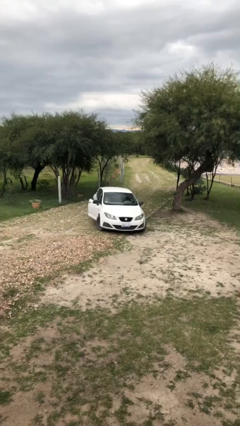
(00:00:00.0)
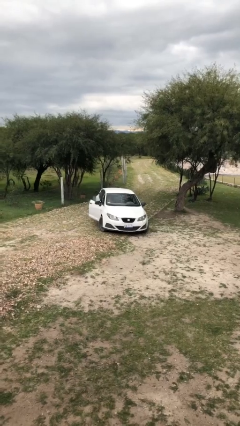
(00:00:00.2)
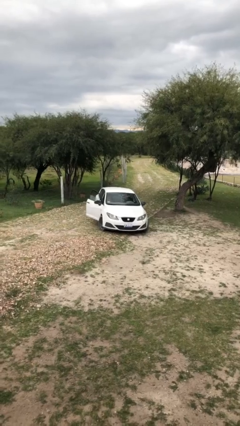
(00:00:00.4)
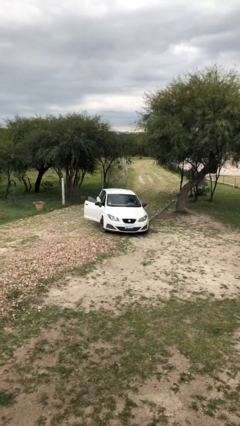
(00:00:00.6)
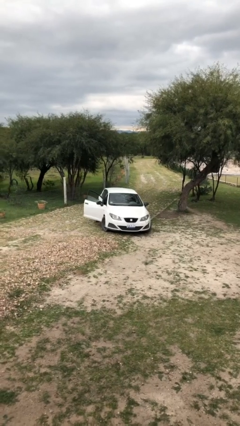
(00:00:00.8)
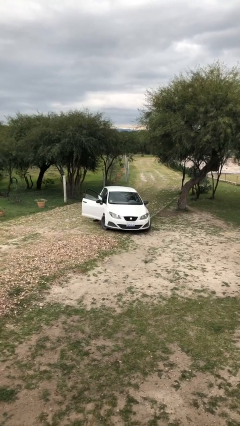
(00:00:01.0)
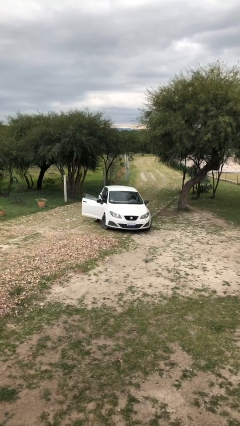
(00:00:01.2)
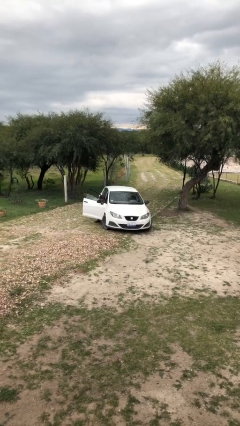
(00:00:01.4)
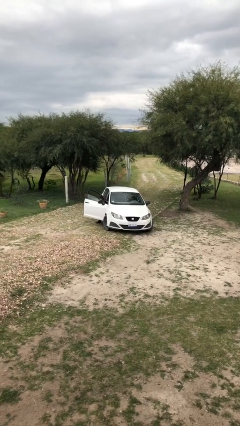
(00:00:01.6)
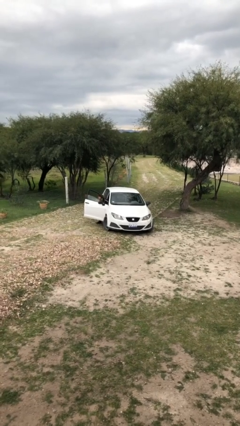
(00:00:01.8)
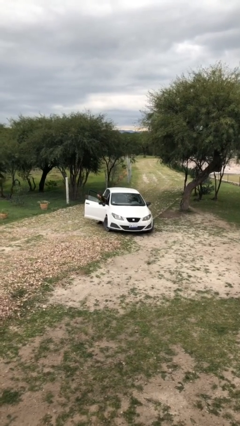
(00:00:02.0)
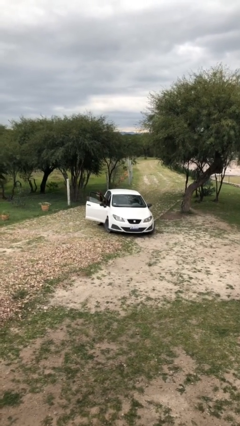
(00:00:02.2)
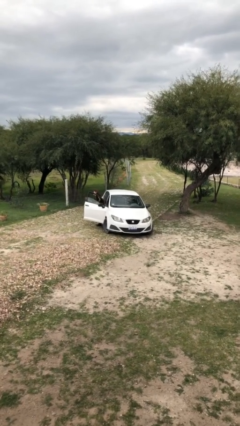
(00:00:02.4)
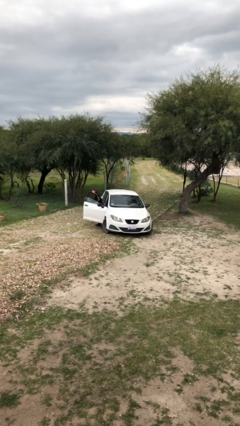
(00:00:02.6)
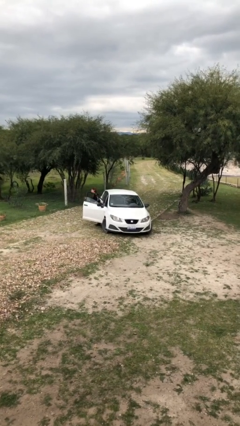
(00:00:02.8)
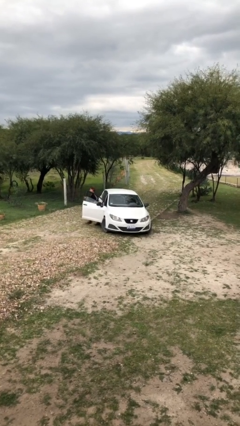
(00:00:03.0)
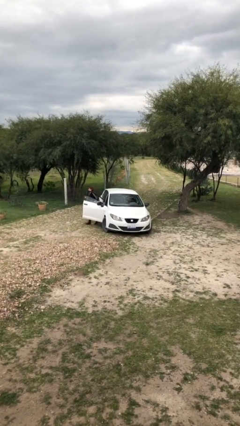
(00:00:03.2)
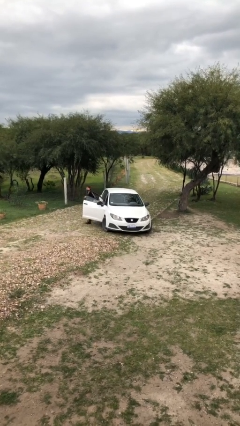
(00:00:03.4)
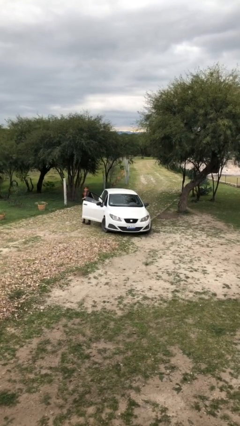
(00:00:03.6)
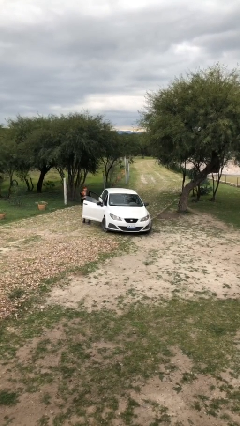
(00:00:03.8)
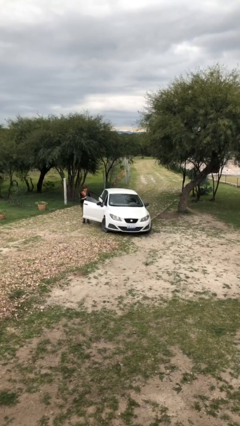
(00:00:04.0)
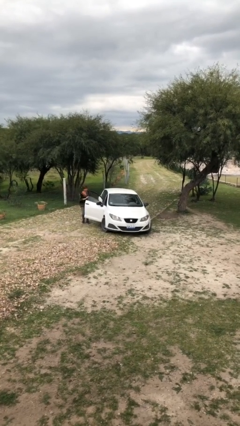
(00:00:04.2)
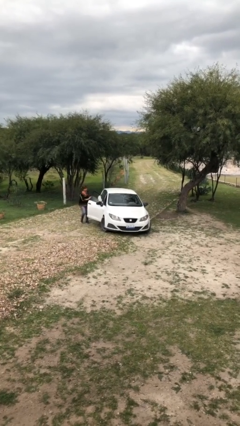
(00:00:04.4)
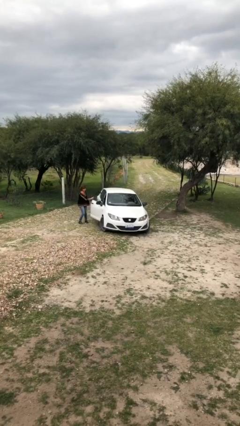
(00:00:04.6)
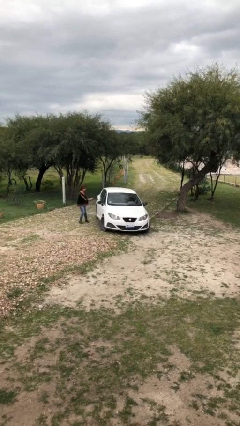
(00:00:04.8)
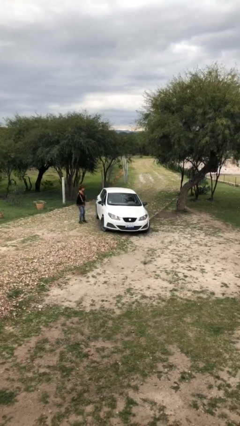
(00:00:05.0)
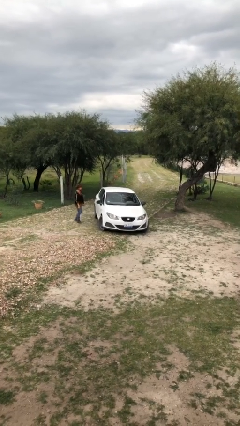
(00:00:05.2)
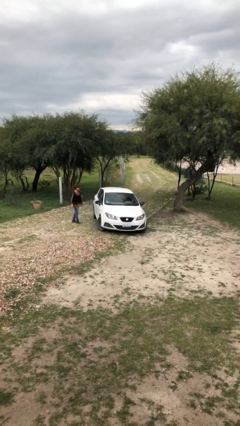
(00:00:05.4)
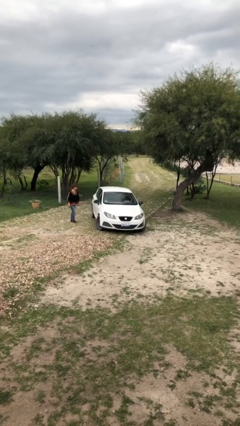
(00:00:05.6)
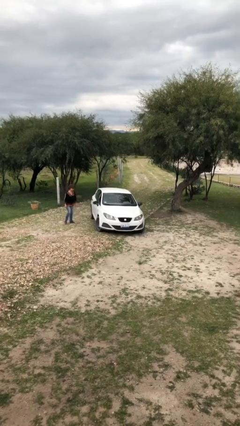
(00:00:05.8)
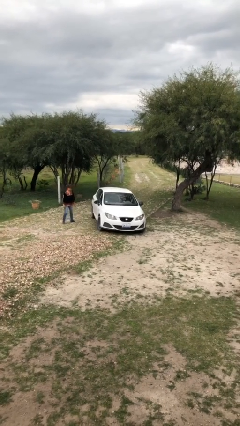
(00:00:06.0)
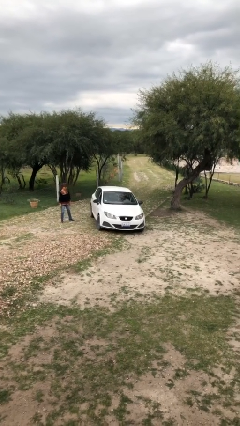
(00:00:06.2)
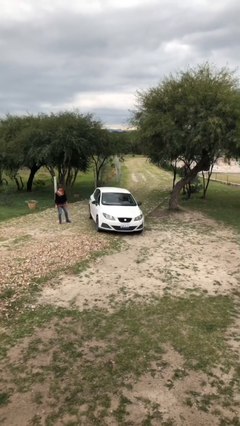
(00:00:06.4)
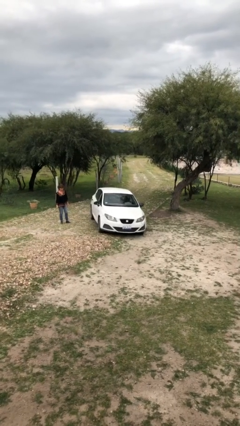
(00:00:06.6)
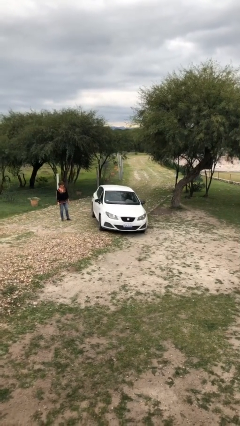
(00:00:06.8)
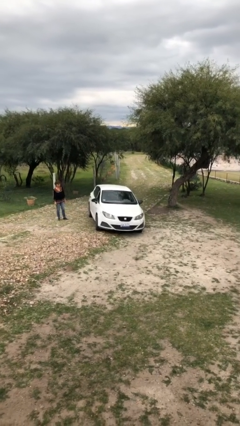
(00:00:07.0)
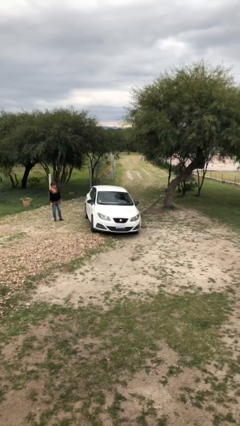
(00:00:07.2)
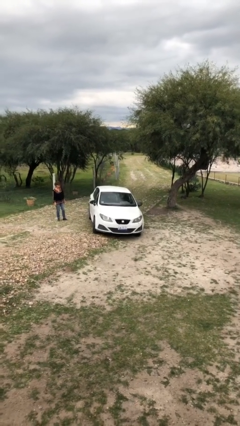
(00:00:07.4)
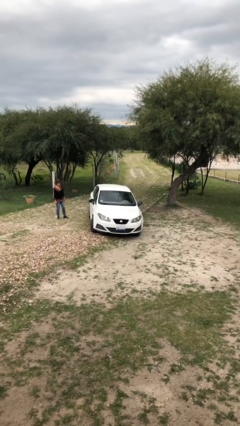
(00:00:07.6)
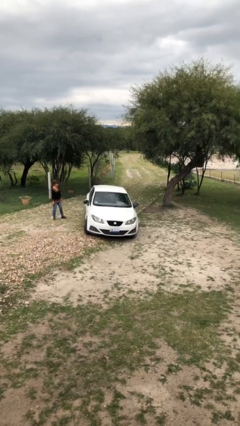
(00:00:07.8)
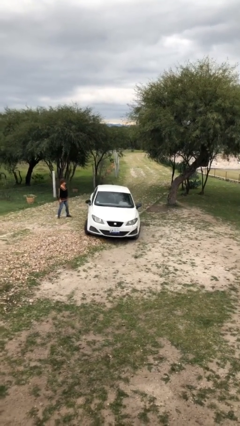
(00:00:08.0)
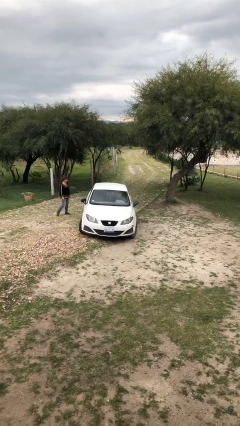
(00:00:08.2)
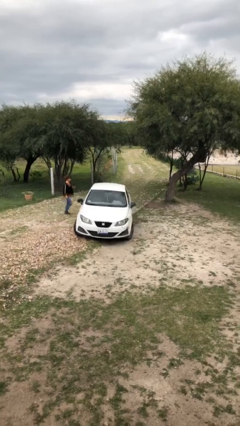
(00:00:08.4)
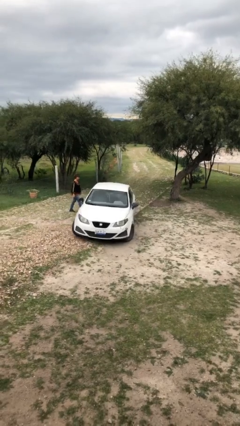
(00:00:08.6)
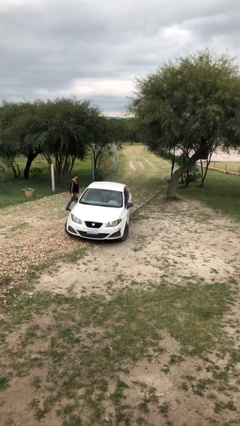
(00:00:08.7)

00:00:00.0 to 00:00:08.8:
car drops off person

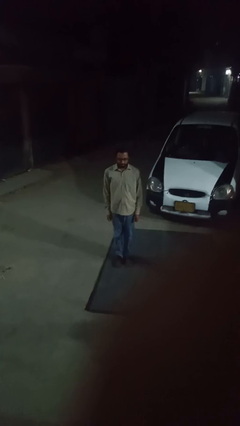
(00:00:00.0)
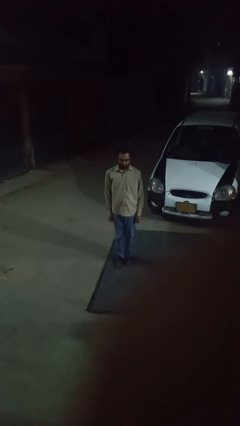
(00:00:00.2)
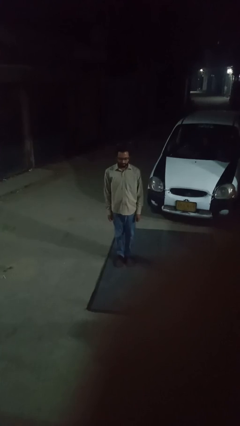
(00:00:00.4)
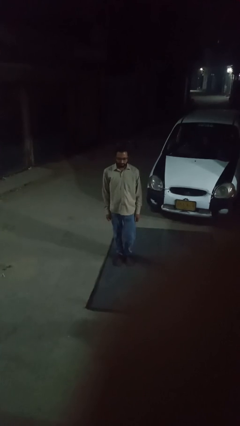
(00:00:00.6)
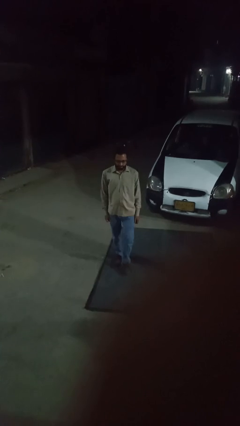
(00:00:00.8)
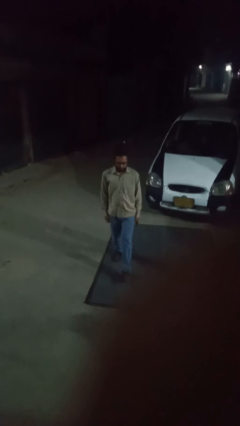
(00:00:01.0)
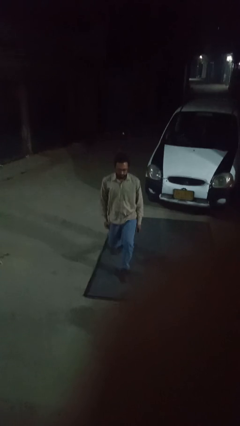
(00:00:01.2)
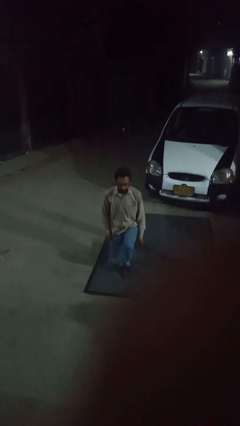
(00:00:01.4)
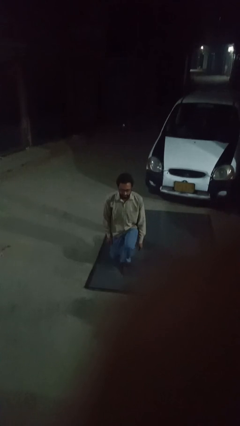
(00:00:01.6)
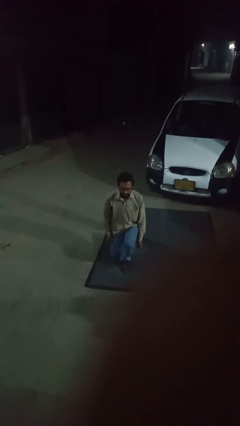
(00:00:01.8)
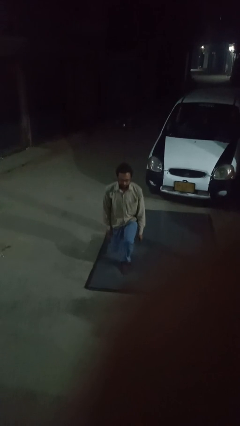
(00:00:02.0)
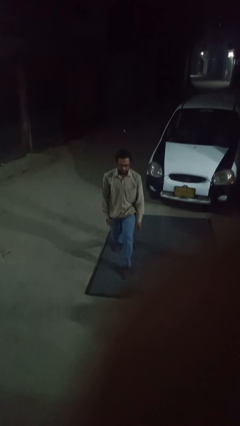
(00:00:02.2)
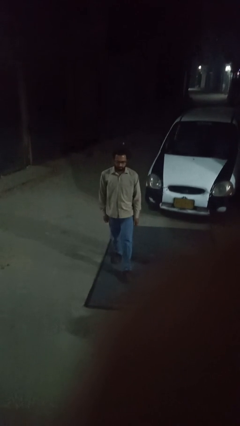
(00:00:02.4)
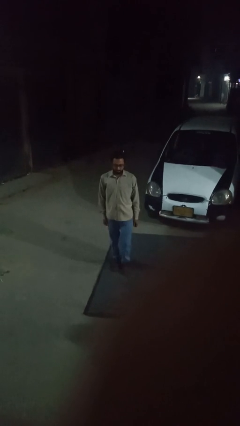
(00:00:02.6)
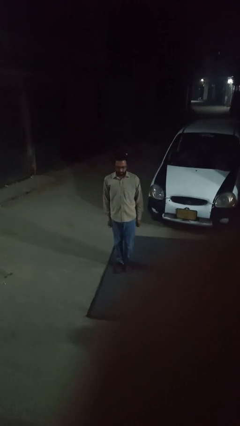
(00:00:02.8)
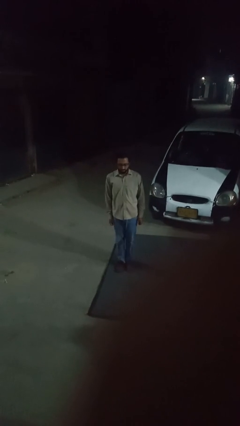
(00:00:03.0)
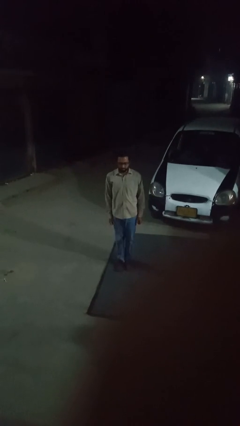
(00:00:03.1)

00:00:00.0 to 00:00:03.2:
person exercises with lunges

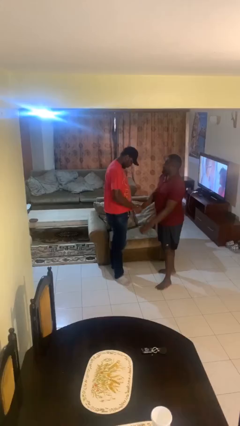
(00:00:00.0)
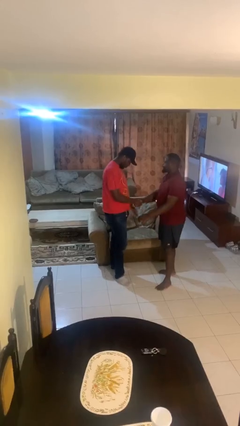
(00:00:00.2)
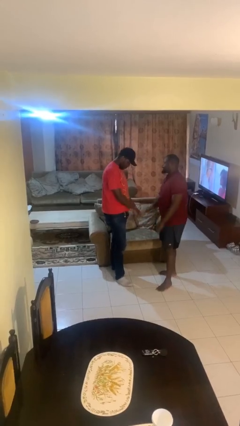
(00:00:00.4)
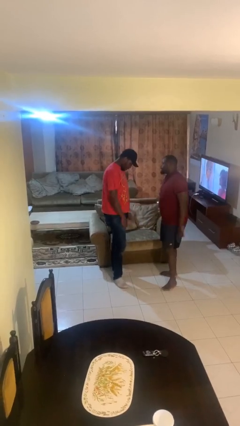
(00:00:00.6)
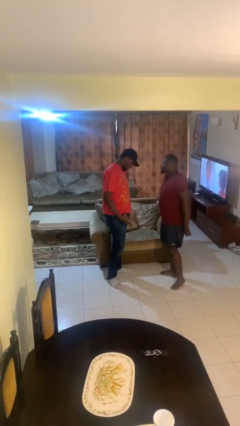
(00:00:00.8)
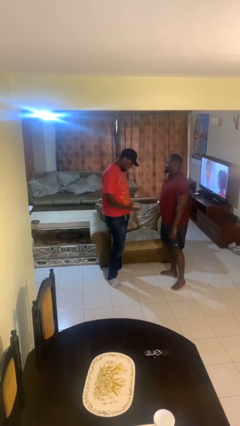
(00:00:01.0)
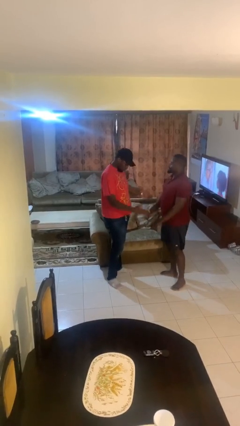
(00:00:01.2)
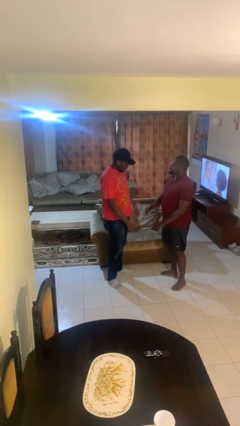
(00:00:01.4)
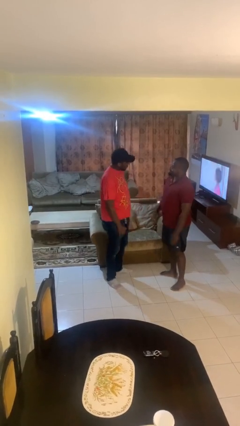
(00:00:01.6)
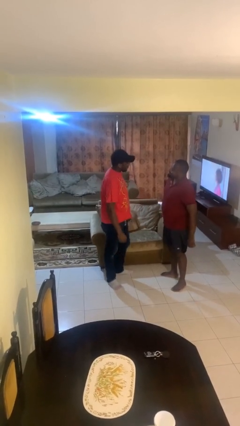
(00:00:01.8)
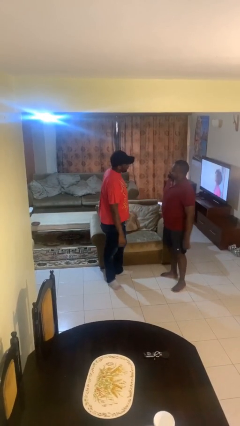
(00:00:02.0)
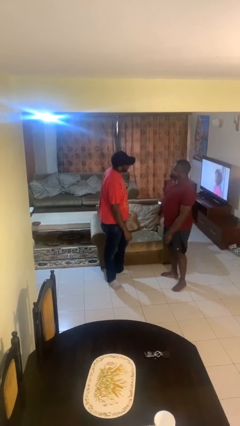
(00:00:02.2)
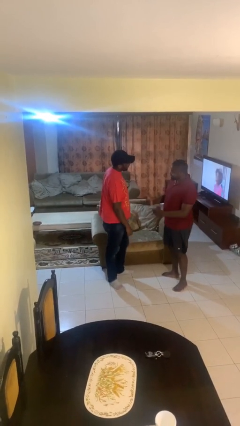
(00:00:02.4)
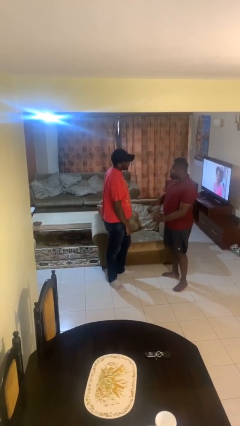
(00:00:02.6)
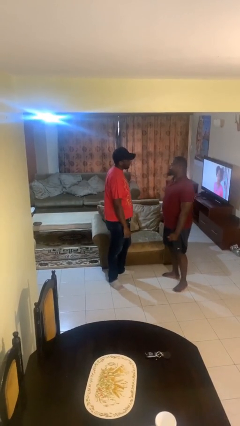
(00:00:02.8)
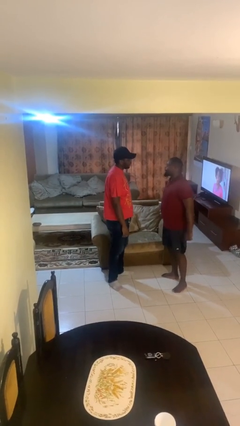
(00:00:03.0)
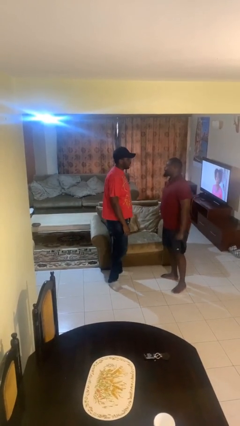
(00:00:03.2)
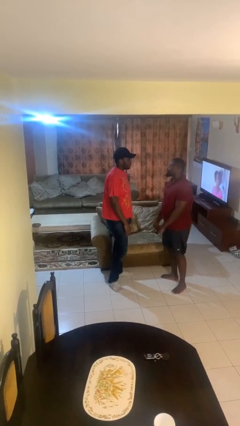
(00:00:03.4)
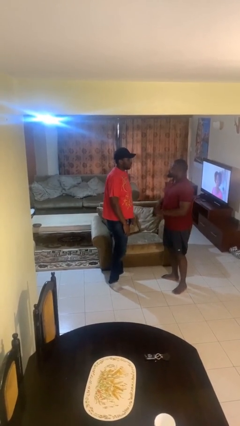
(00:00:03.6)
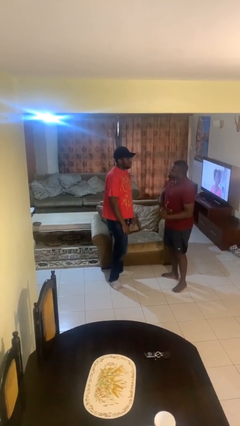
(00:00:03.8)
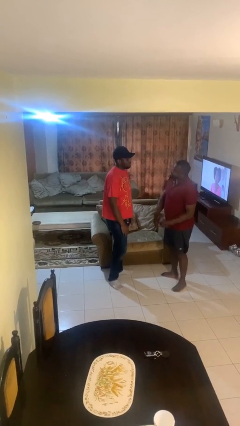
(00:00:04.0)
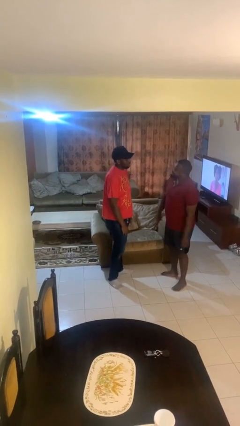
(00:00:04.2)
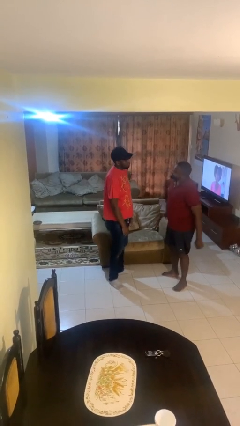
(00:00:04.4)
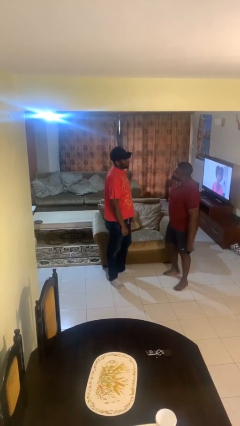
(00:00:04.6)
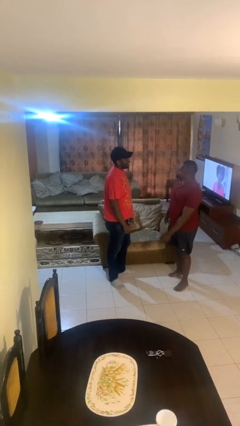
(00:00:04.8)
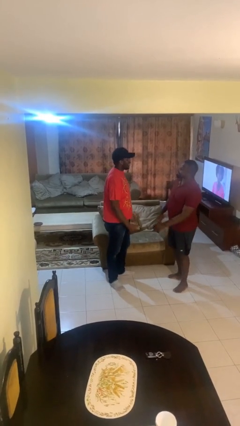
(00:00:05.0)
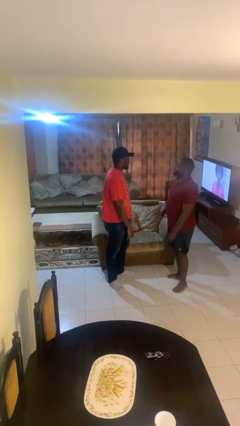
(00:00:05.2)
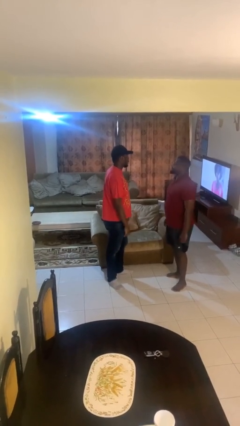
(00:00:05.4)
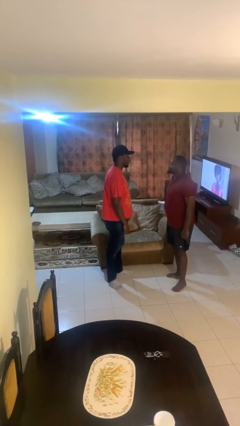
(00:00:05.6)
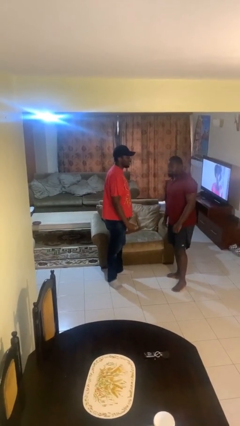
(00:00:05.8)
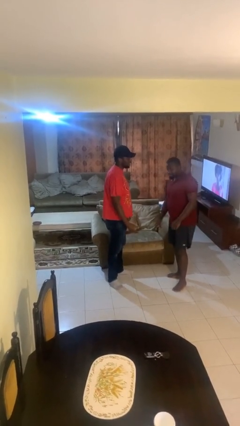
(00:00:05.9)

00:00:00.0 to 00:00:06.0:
person talks to person
